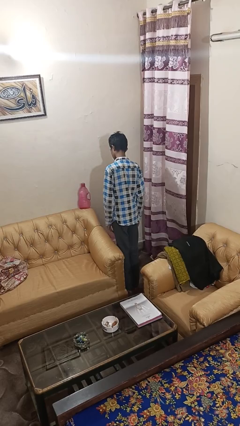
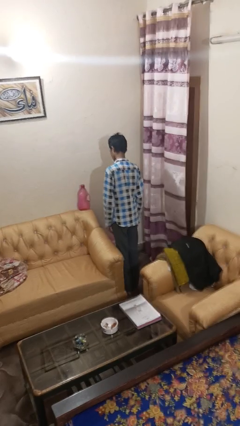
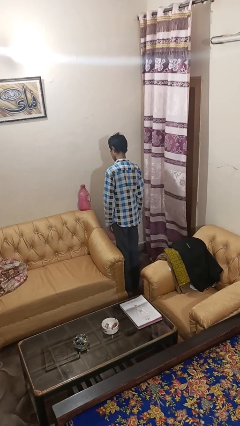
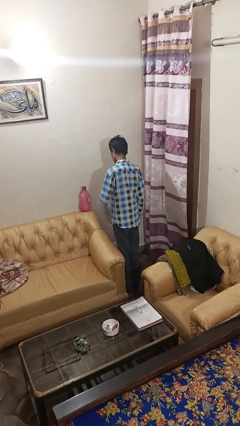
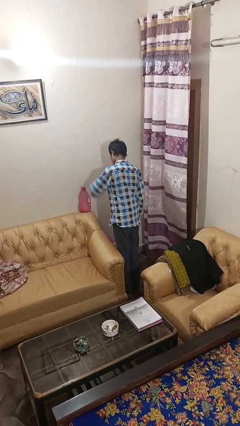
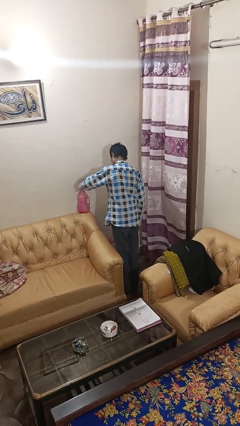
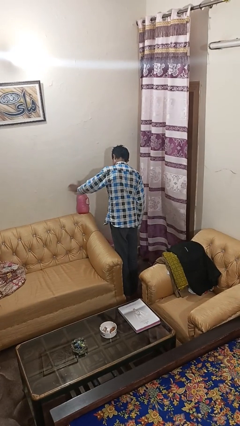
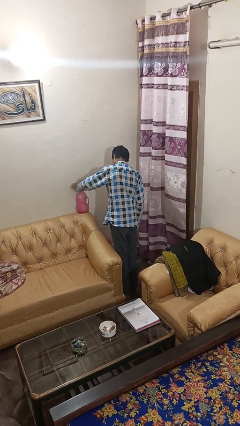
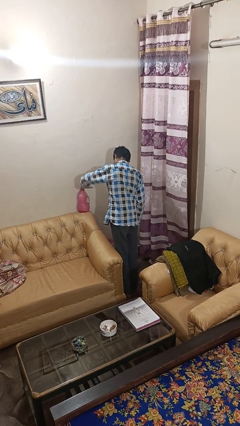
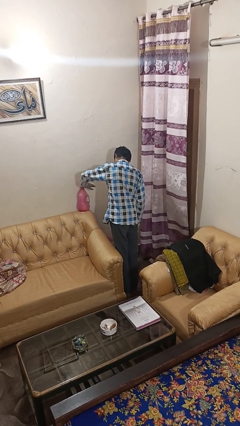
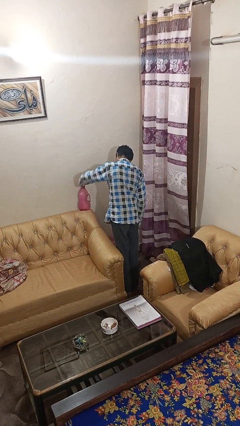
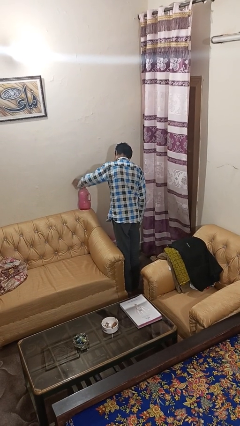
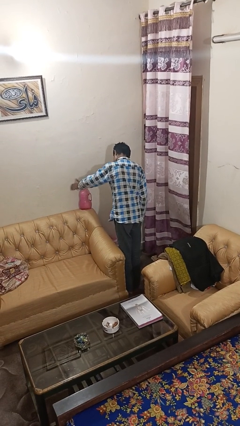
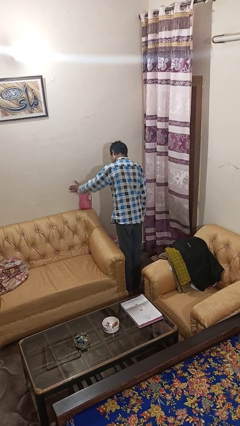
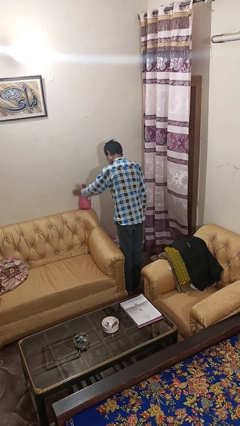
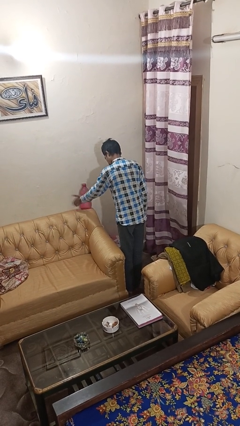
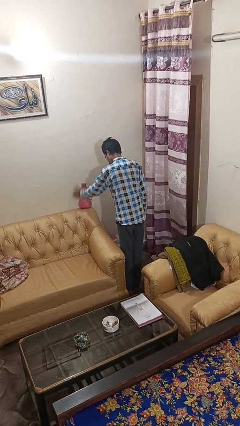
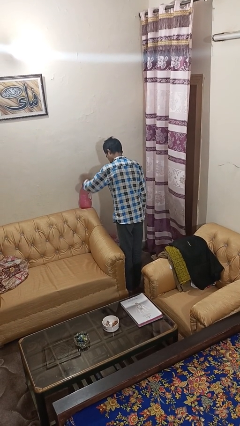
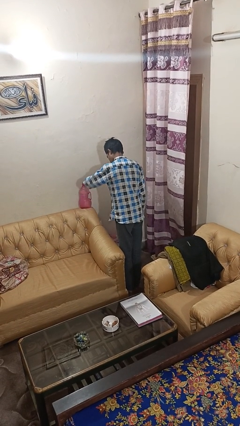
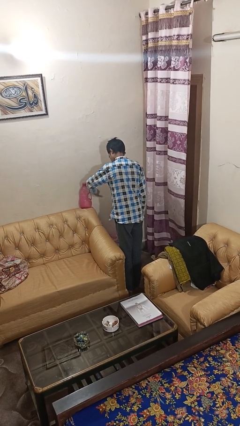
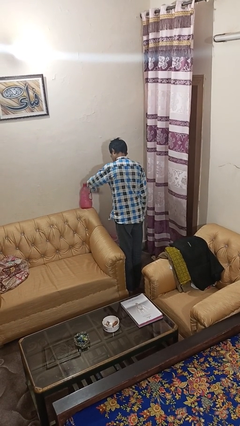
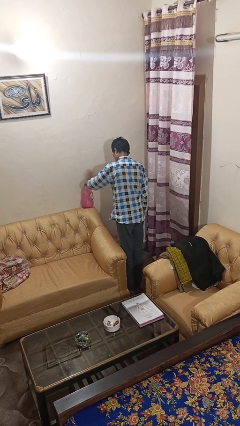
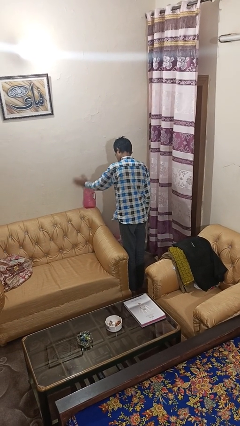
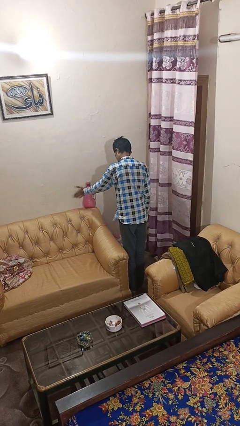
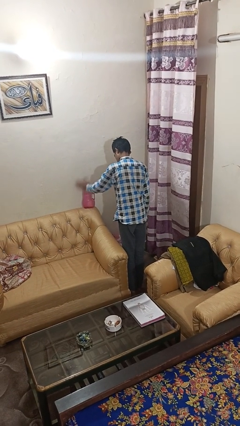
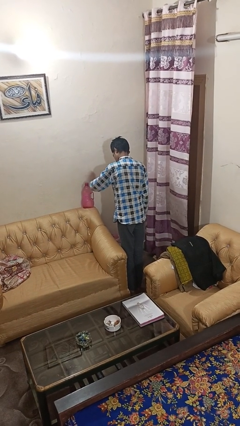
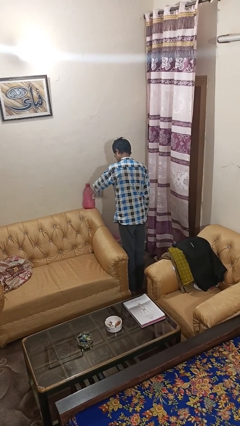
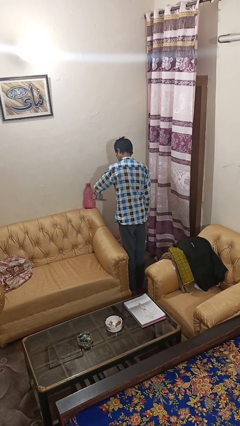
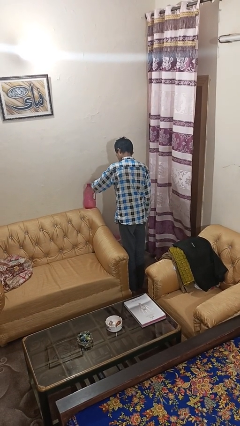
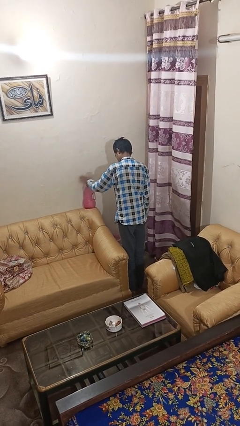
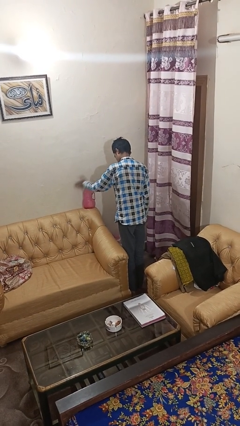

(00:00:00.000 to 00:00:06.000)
person waves hand over object

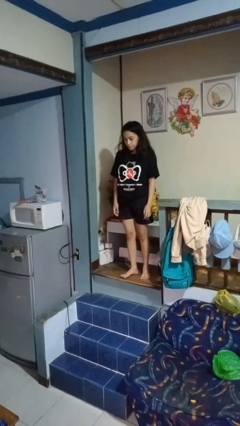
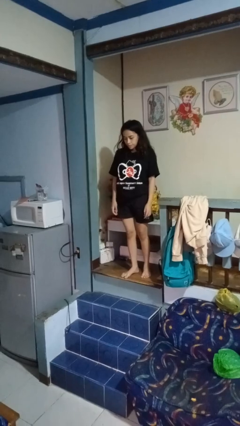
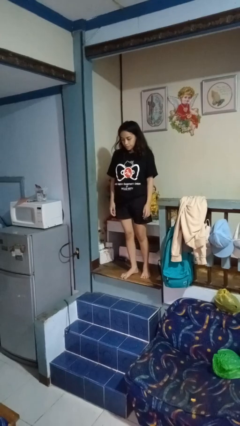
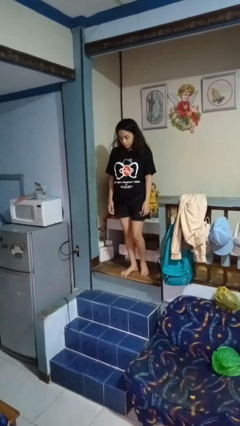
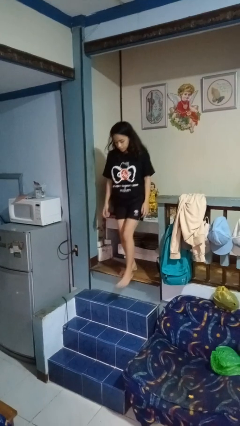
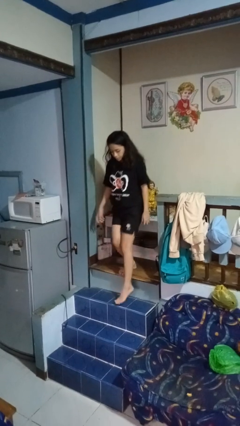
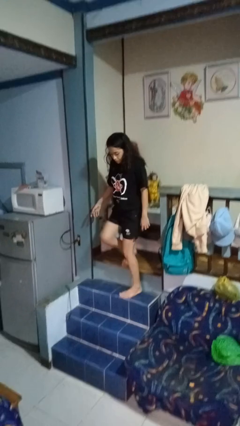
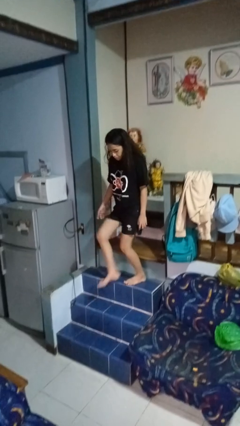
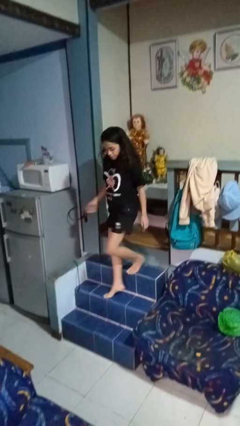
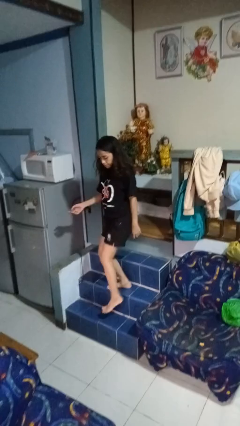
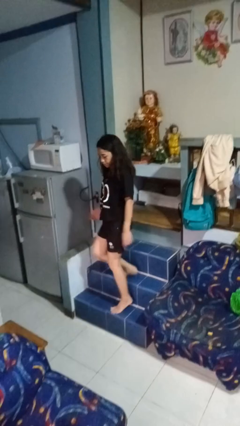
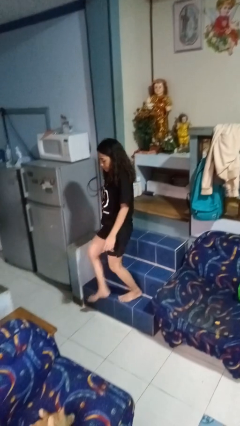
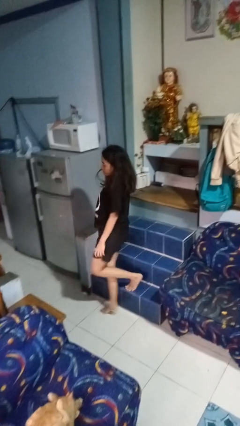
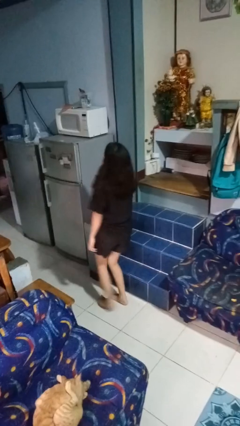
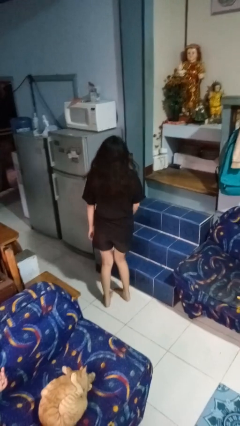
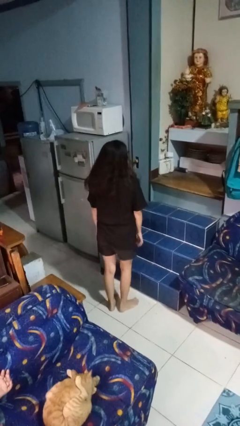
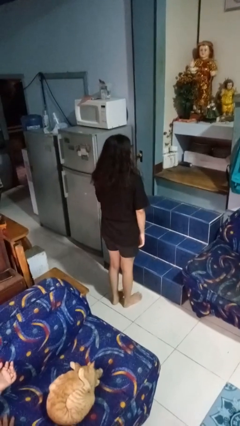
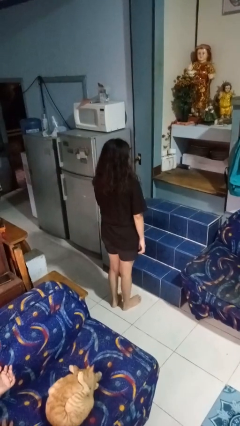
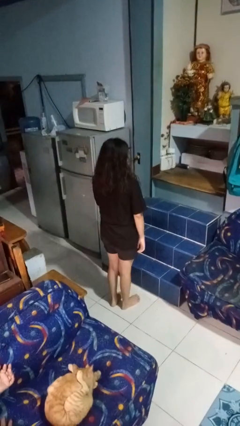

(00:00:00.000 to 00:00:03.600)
person climbs down stairs

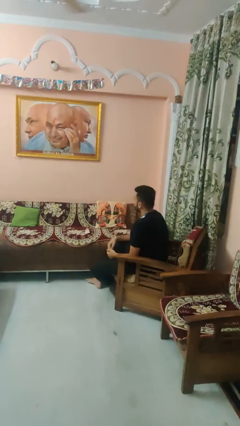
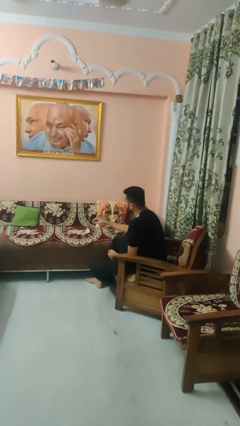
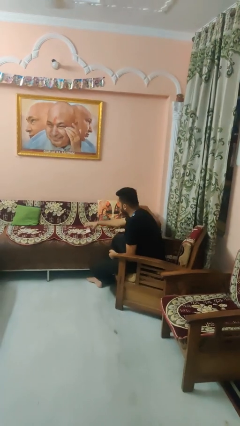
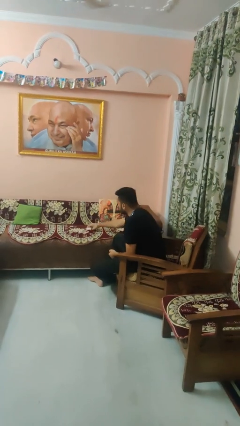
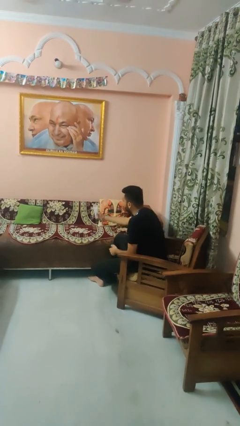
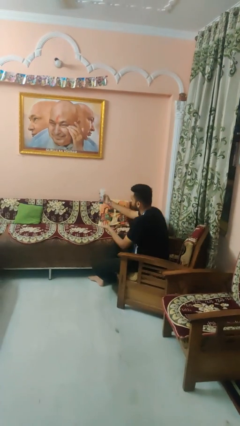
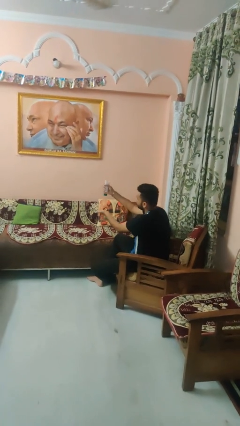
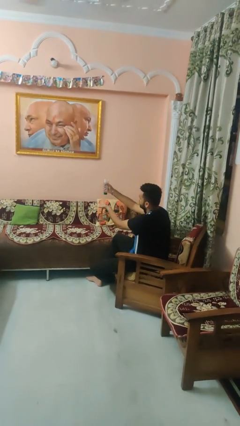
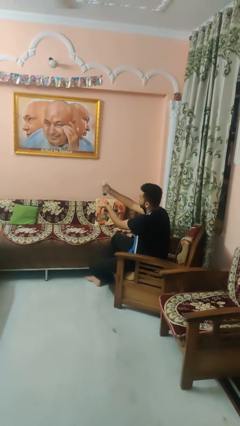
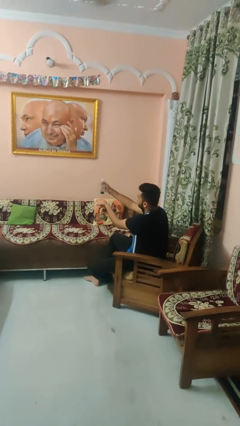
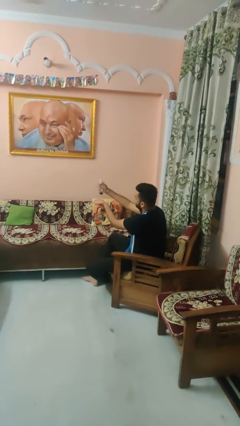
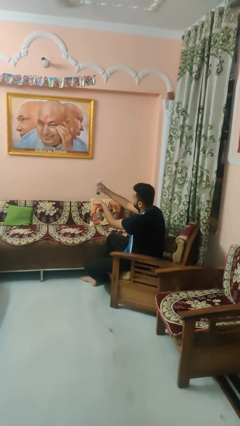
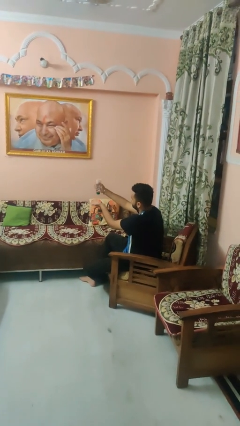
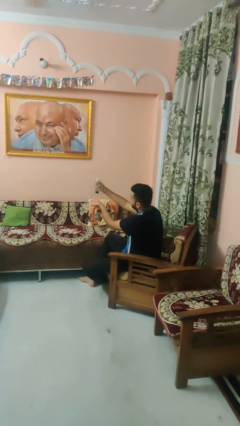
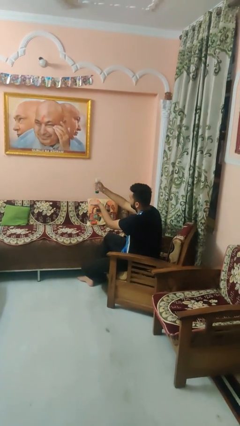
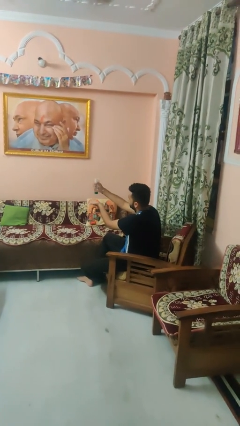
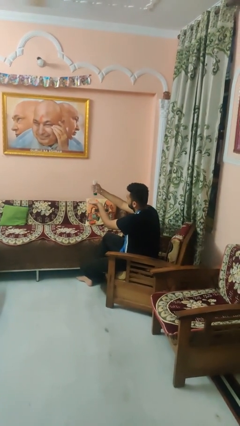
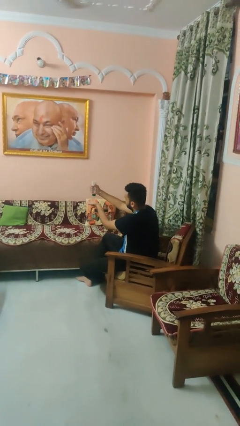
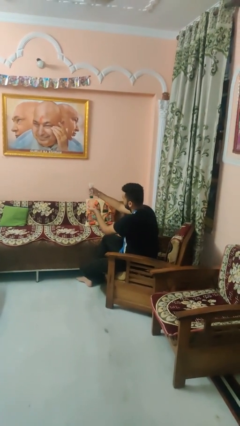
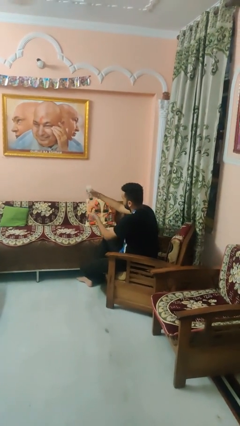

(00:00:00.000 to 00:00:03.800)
person squeezes object

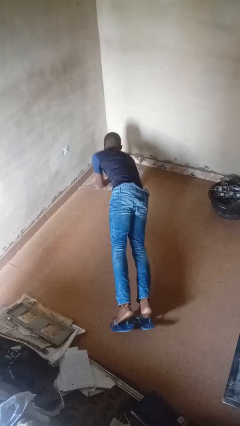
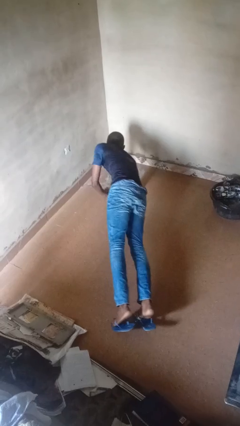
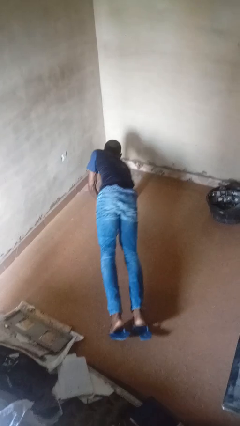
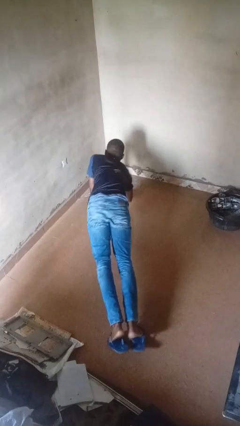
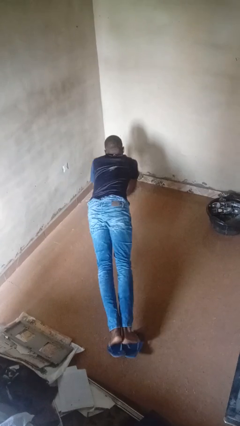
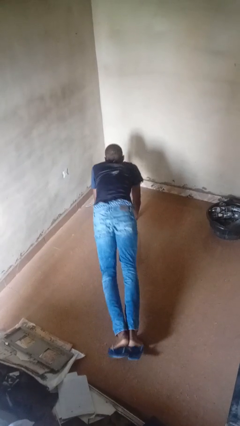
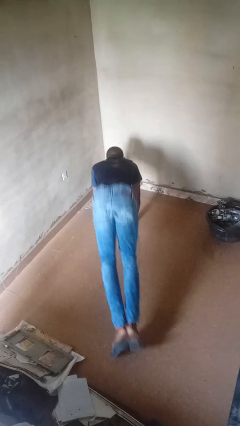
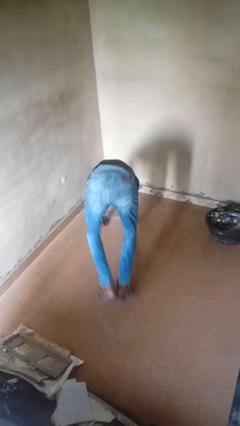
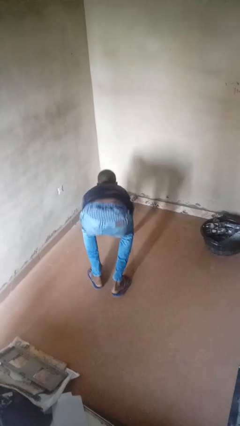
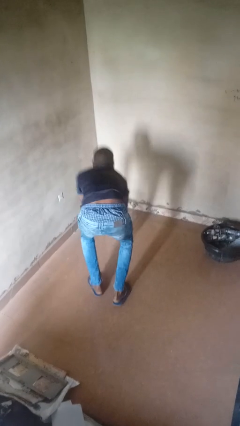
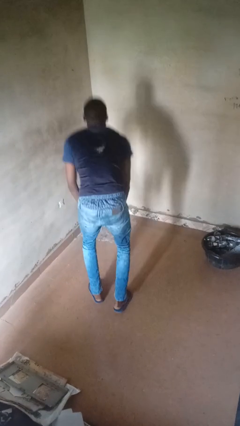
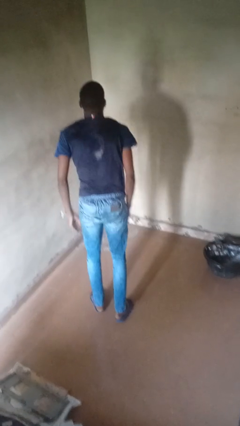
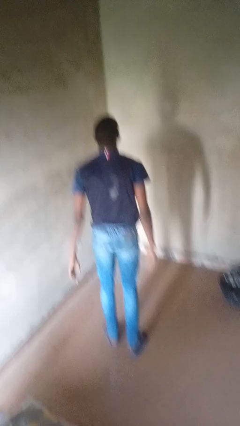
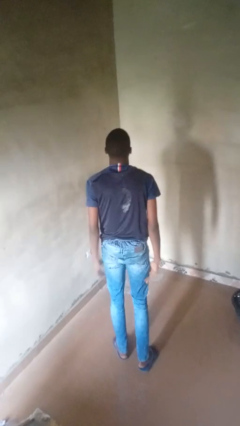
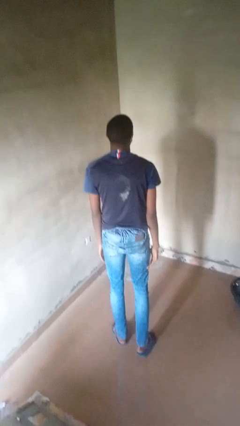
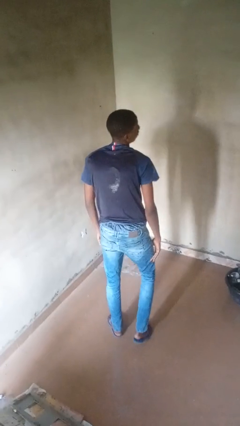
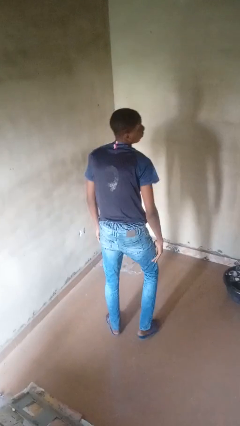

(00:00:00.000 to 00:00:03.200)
person stands up from floor

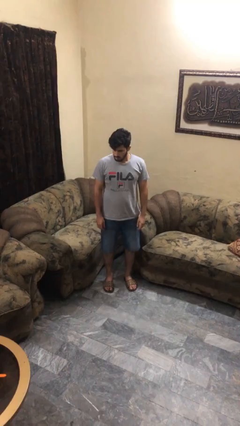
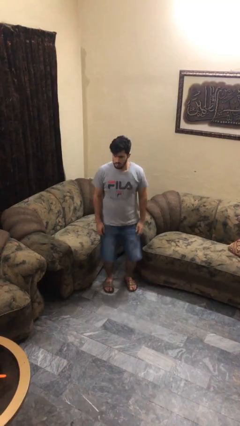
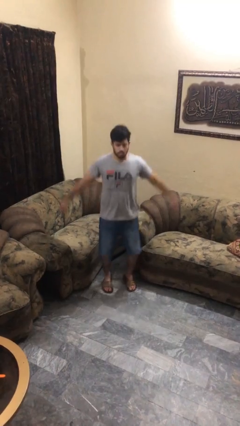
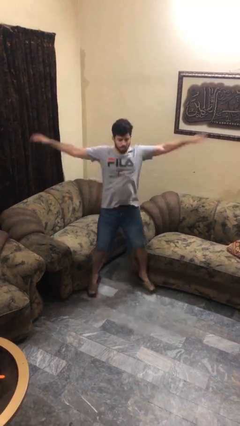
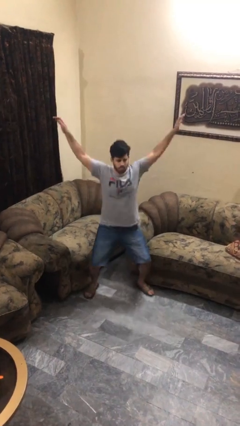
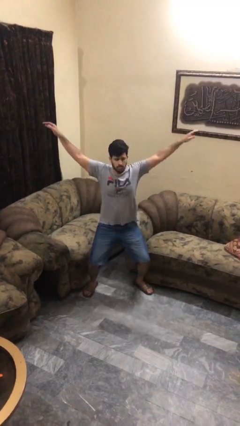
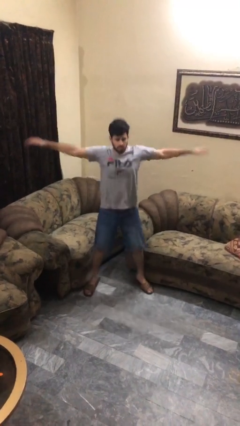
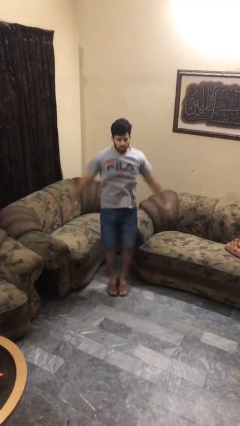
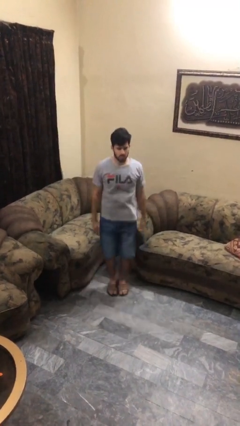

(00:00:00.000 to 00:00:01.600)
person exercises with jumping jacks
